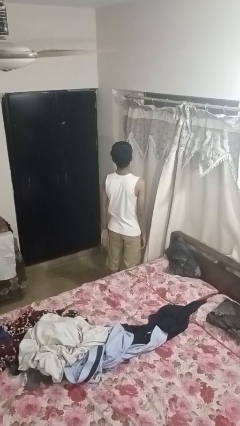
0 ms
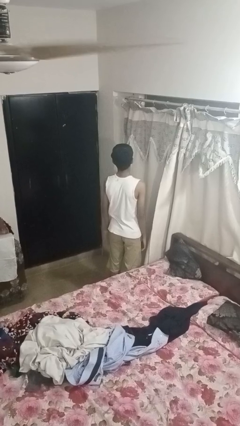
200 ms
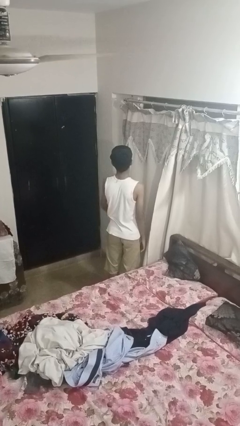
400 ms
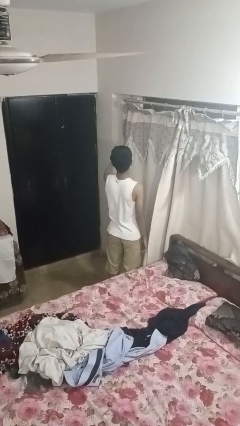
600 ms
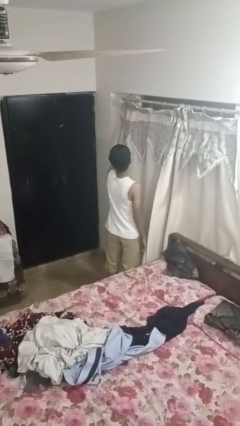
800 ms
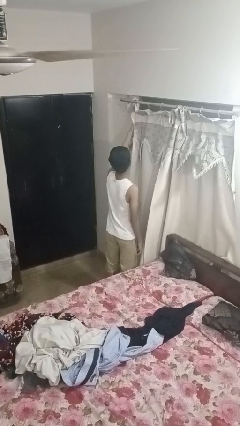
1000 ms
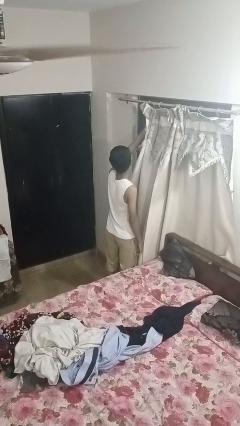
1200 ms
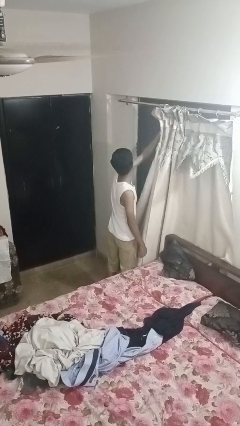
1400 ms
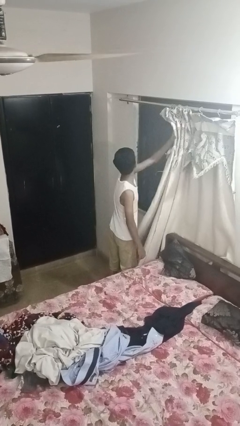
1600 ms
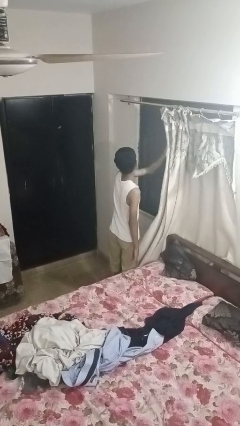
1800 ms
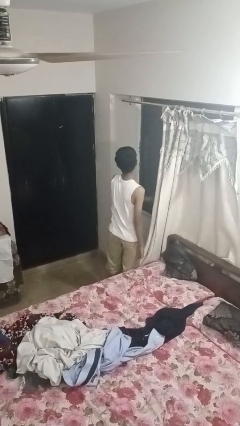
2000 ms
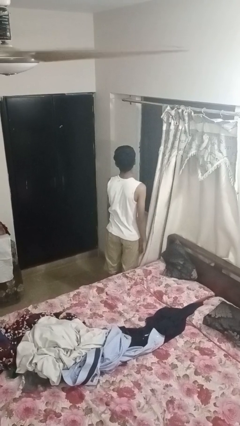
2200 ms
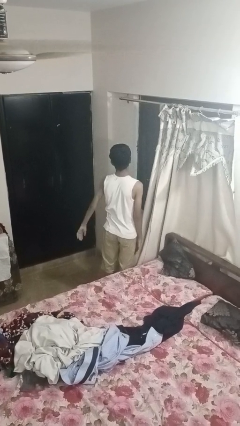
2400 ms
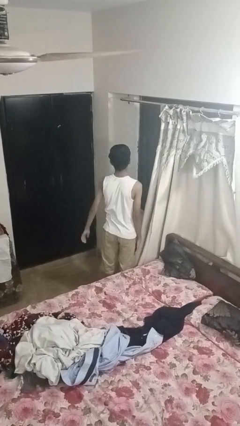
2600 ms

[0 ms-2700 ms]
person opens curtains

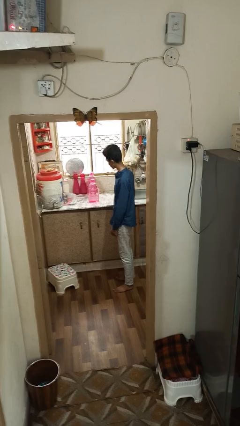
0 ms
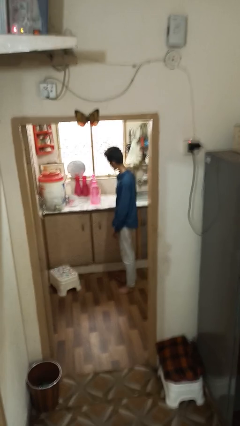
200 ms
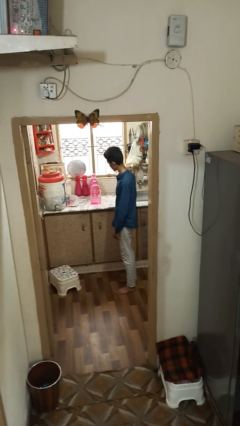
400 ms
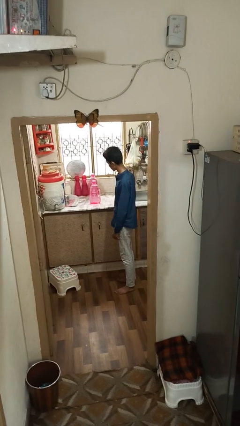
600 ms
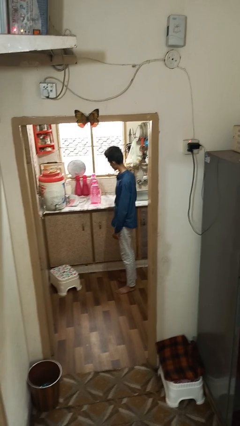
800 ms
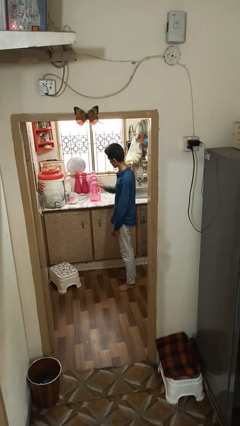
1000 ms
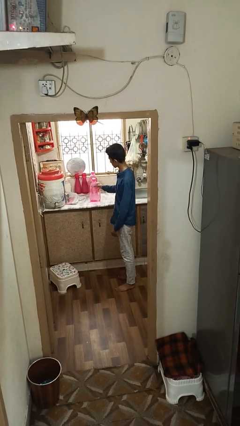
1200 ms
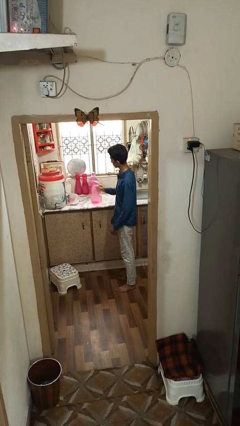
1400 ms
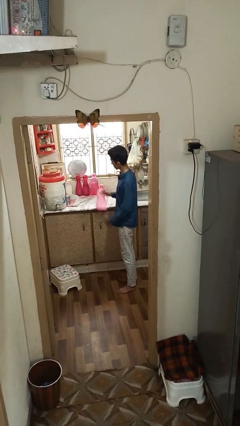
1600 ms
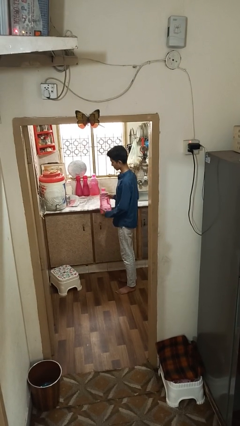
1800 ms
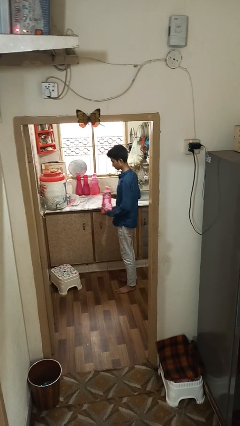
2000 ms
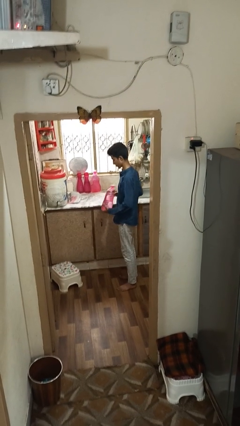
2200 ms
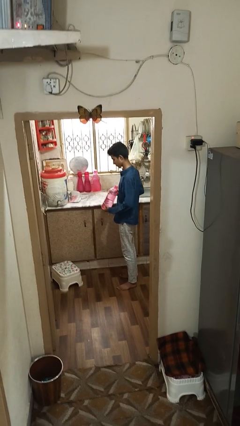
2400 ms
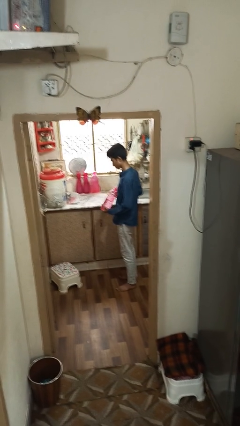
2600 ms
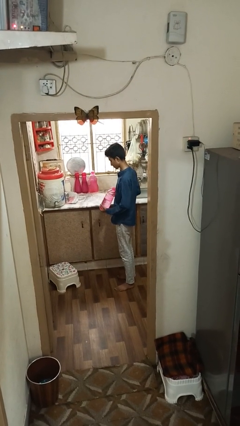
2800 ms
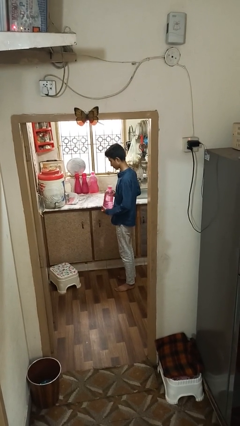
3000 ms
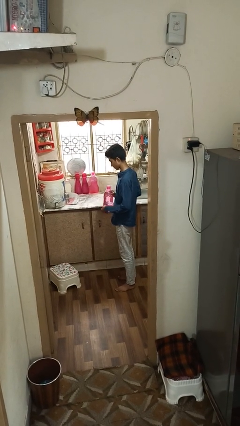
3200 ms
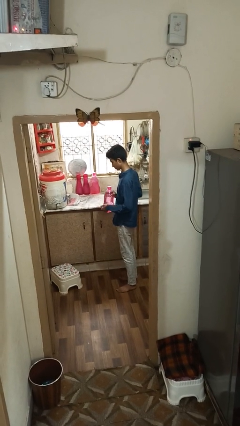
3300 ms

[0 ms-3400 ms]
person picks up object from countertop

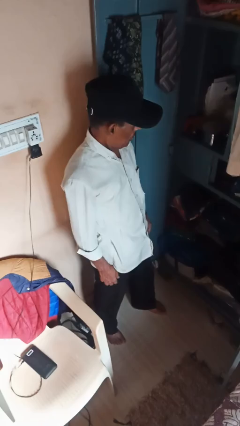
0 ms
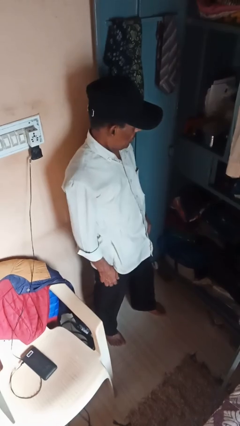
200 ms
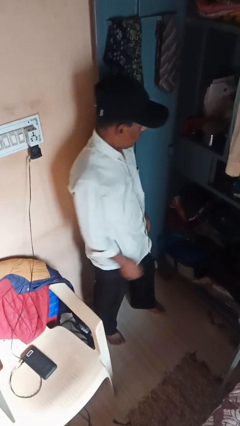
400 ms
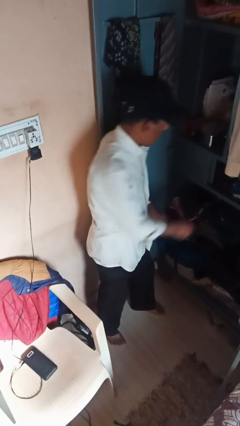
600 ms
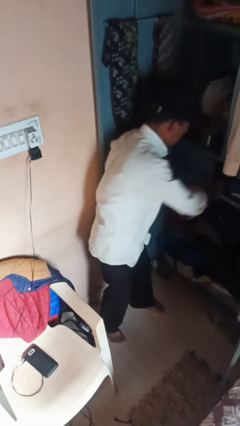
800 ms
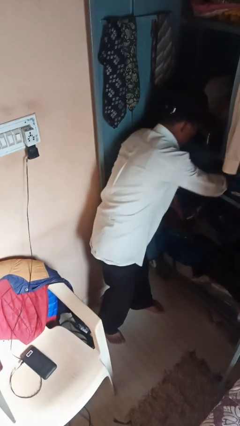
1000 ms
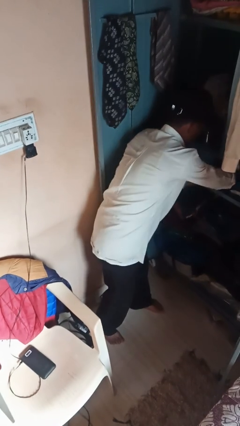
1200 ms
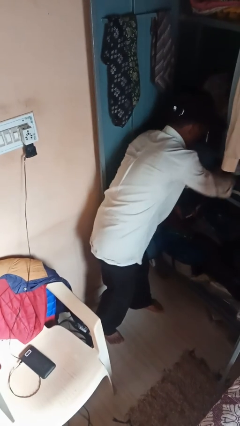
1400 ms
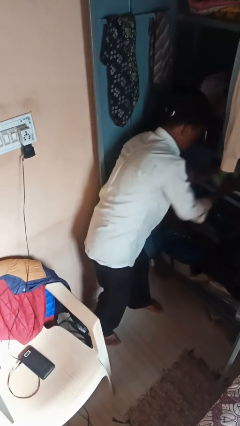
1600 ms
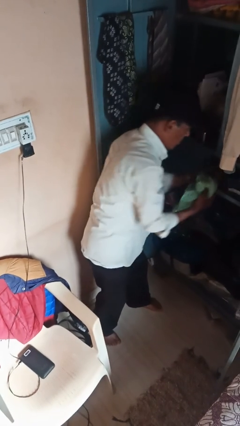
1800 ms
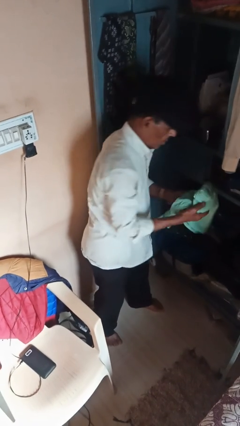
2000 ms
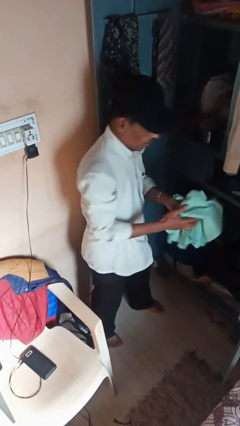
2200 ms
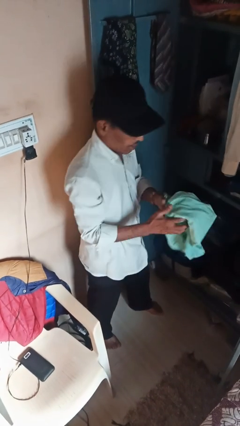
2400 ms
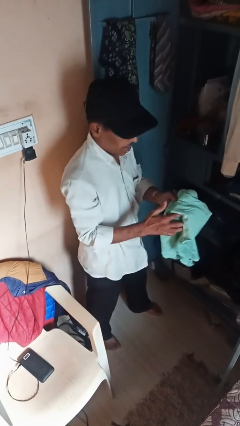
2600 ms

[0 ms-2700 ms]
person takes clothes from dresser

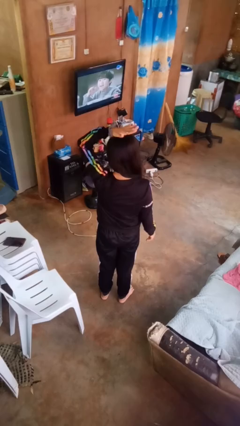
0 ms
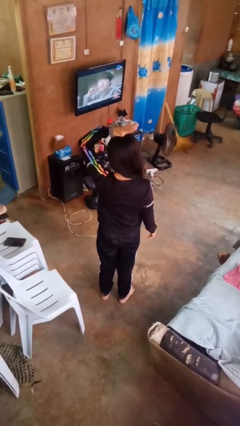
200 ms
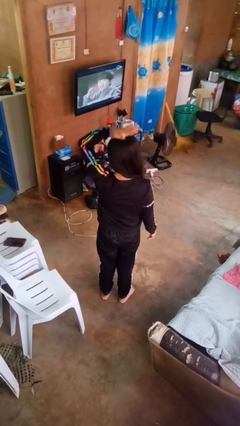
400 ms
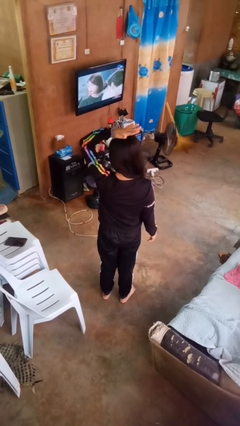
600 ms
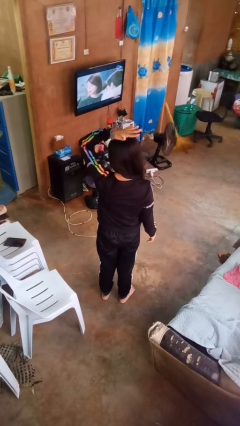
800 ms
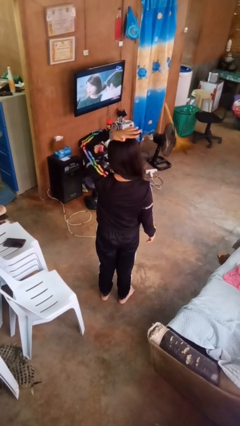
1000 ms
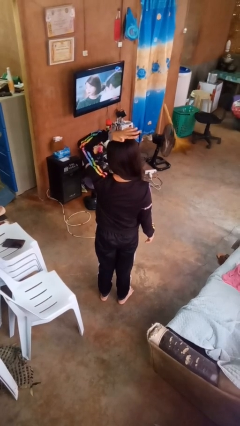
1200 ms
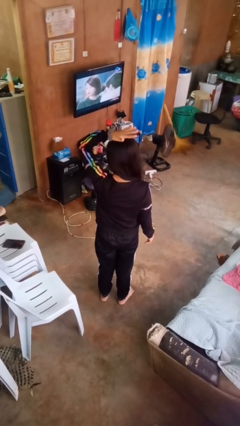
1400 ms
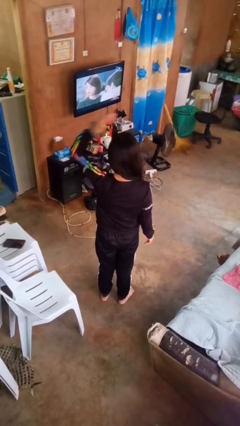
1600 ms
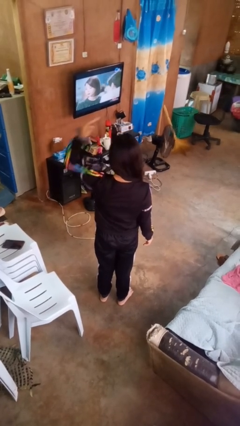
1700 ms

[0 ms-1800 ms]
person pats head

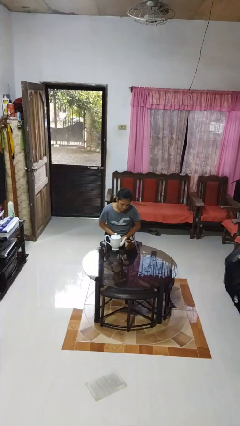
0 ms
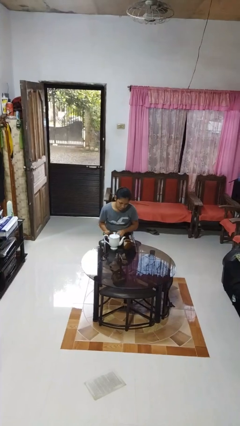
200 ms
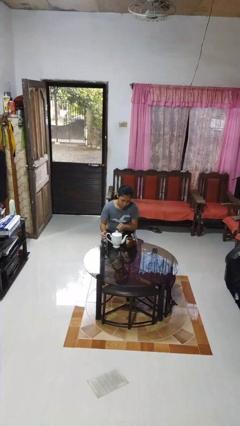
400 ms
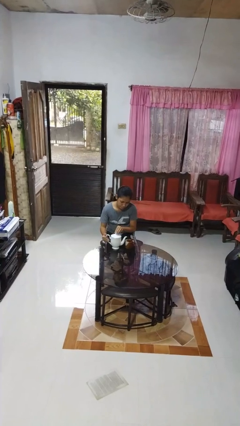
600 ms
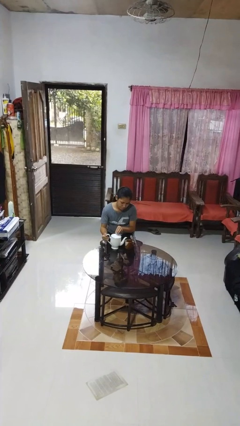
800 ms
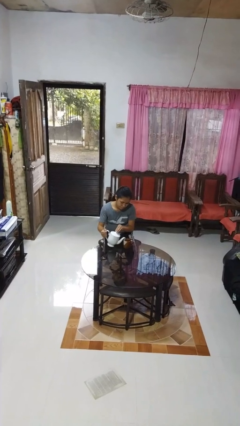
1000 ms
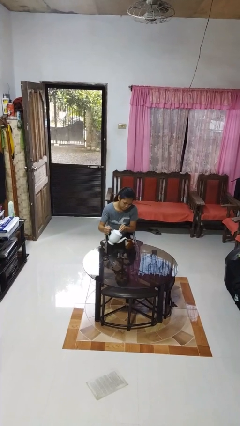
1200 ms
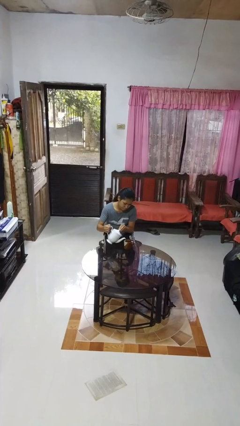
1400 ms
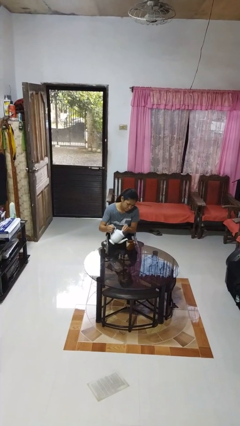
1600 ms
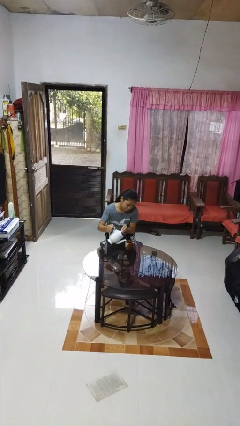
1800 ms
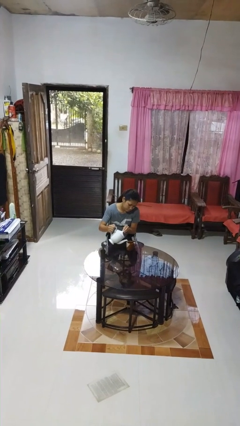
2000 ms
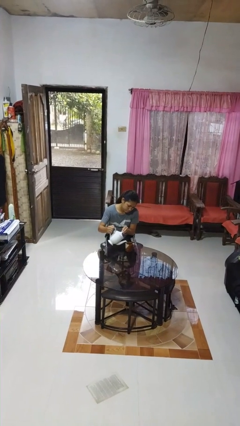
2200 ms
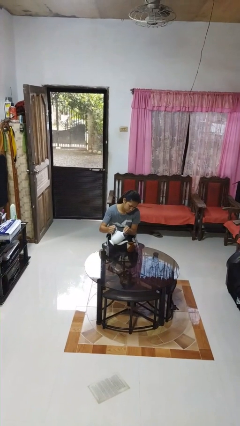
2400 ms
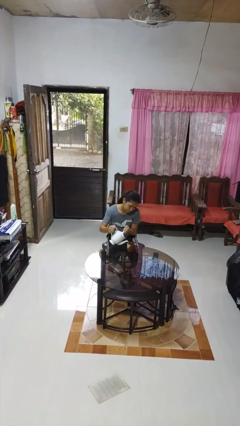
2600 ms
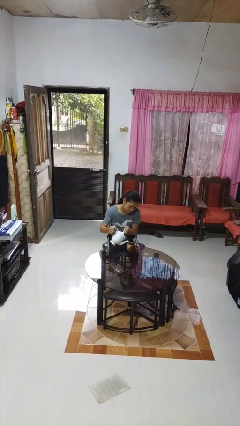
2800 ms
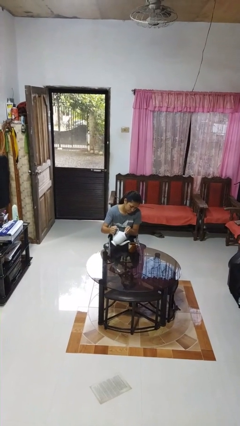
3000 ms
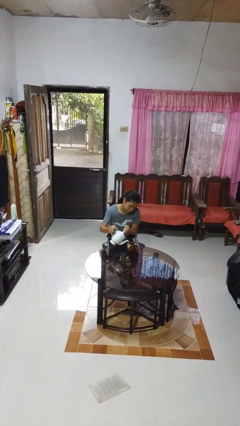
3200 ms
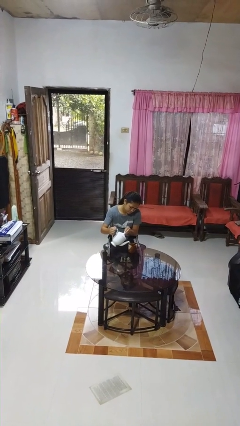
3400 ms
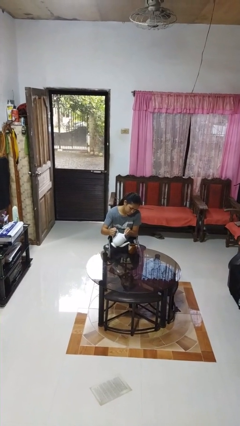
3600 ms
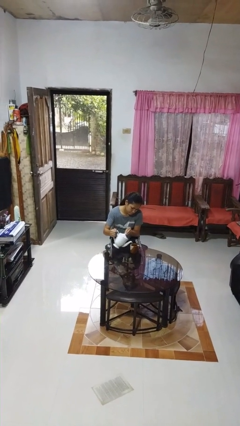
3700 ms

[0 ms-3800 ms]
person pours coffee into mug

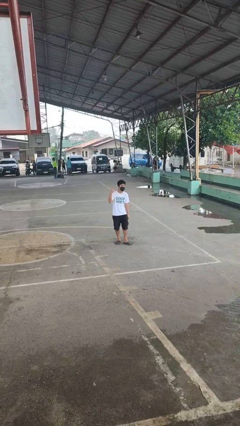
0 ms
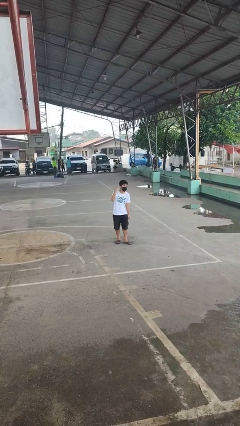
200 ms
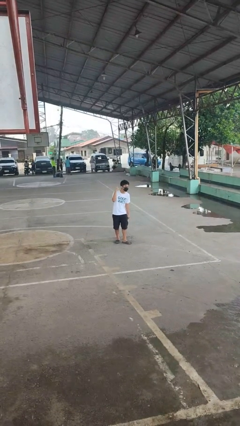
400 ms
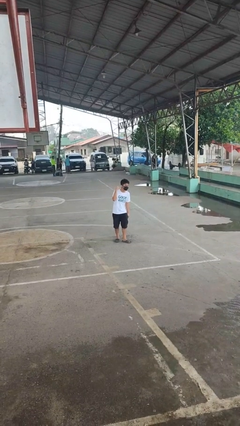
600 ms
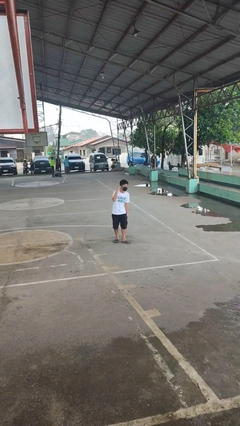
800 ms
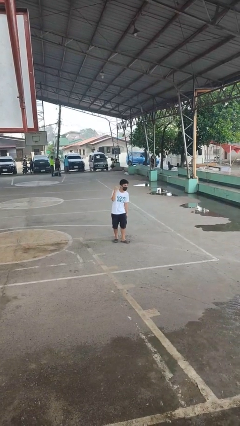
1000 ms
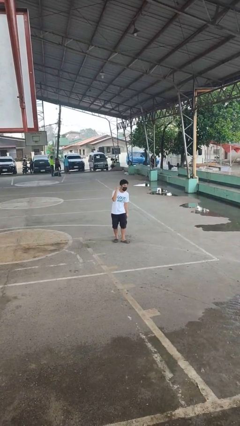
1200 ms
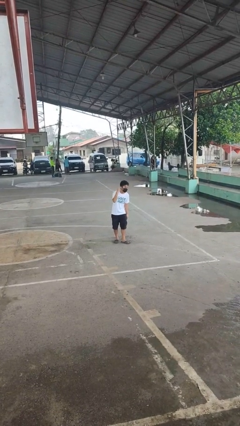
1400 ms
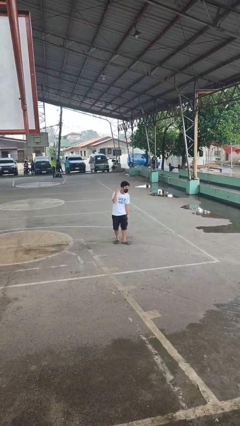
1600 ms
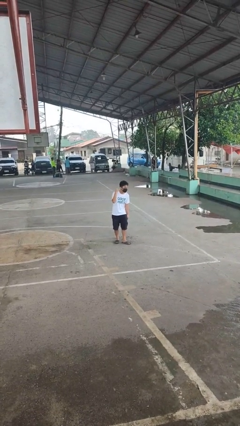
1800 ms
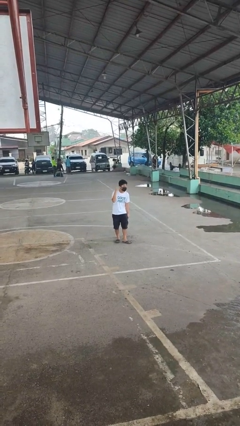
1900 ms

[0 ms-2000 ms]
person gestures listen closely

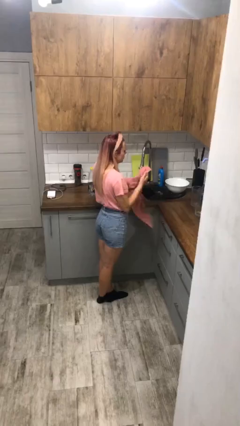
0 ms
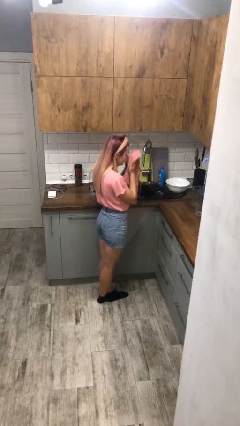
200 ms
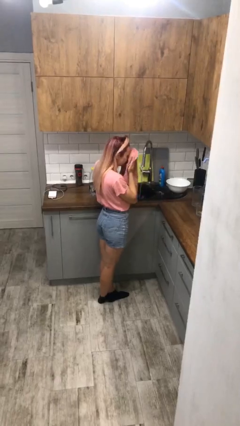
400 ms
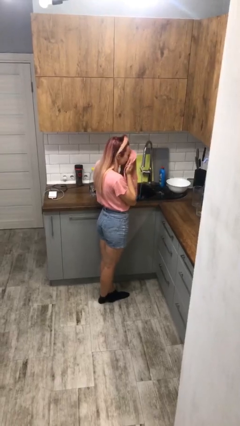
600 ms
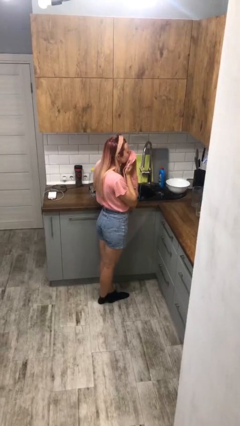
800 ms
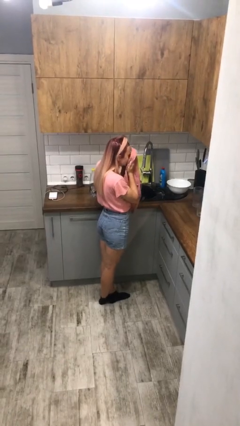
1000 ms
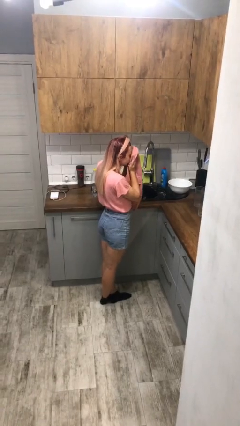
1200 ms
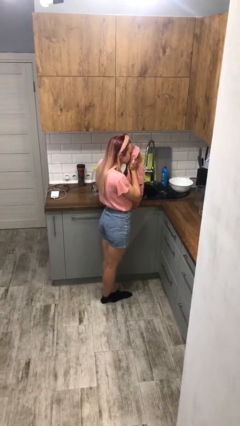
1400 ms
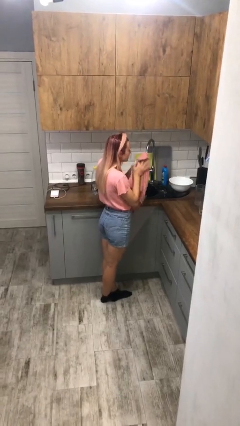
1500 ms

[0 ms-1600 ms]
person dries face with towel
